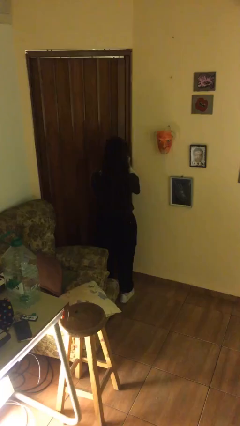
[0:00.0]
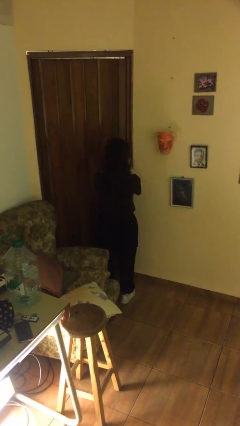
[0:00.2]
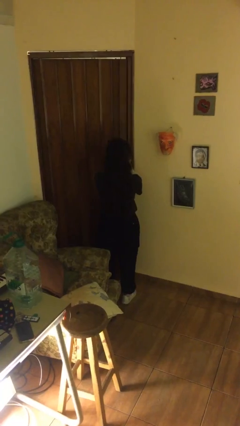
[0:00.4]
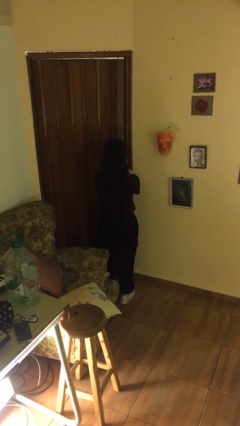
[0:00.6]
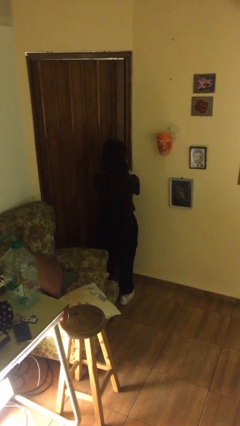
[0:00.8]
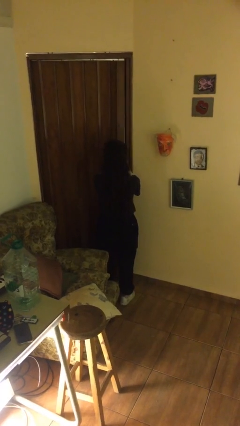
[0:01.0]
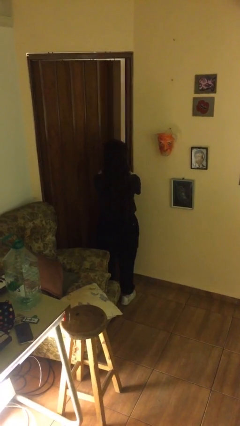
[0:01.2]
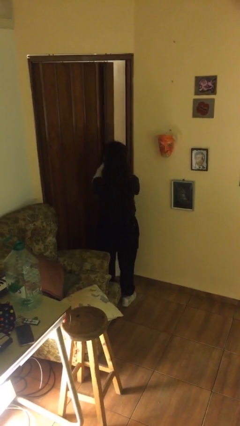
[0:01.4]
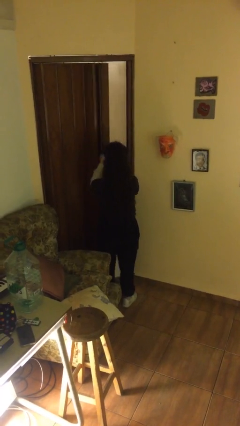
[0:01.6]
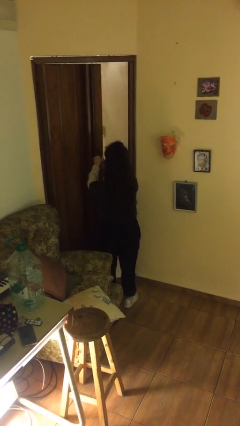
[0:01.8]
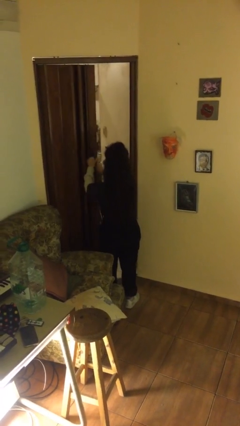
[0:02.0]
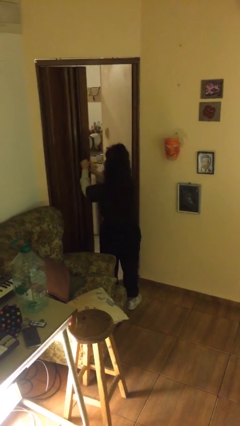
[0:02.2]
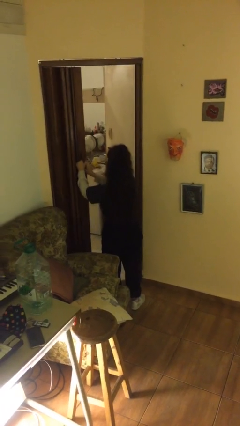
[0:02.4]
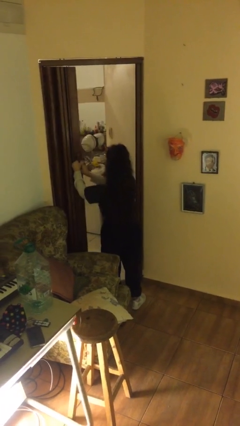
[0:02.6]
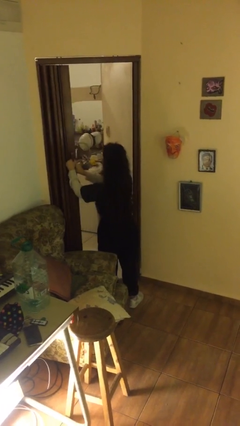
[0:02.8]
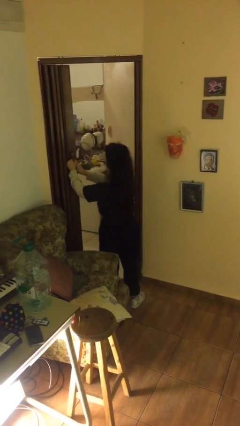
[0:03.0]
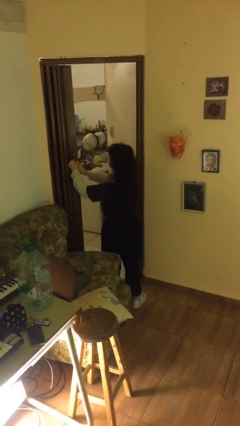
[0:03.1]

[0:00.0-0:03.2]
person opens sliding door

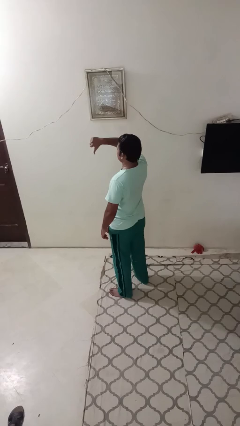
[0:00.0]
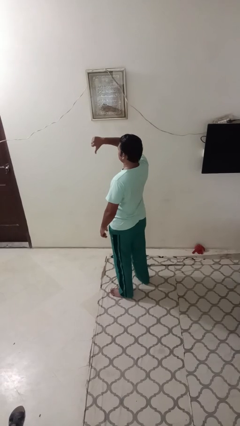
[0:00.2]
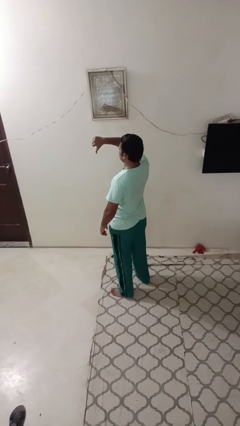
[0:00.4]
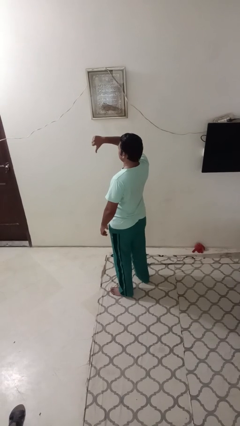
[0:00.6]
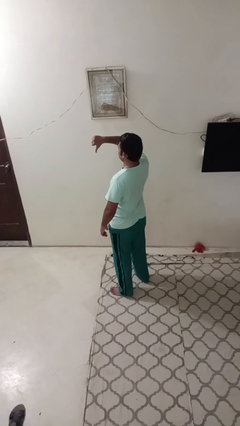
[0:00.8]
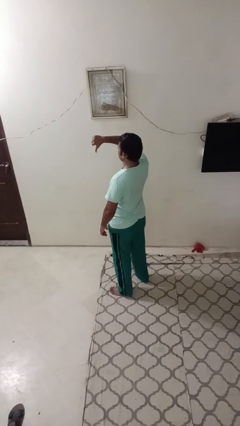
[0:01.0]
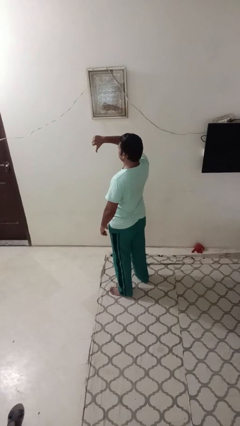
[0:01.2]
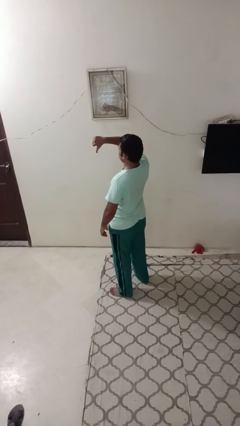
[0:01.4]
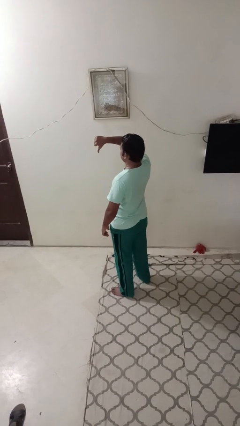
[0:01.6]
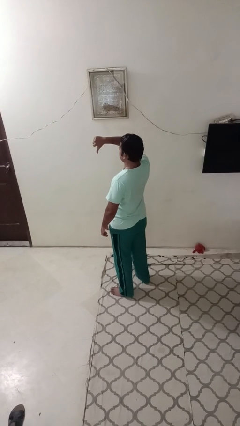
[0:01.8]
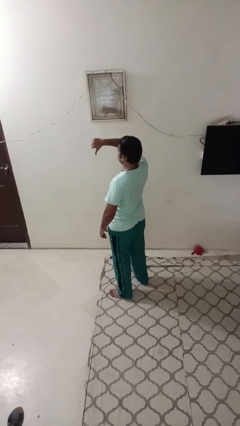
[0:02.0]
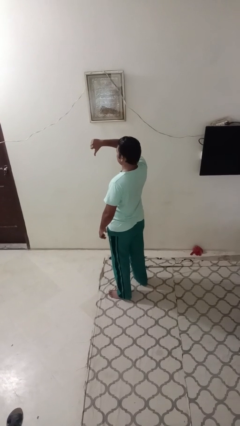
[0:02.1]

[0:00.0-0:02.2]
person gestures thumbs down

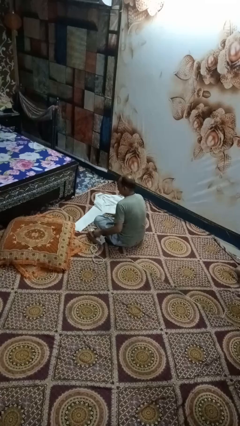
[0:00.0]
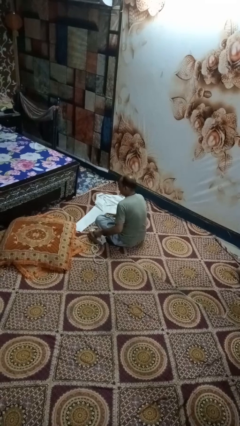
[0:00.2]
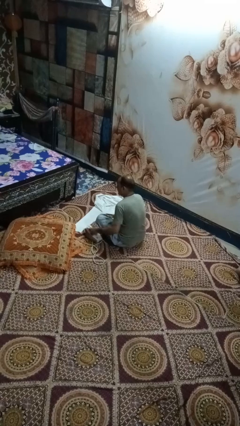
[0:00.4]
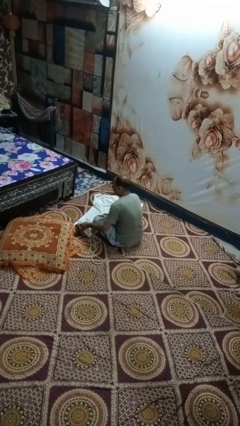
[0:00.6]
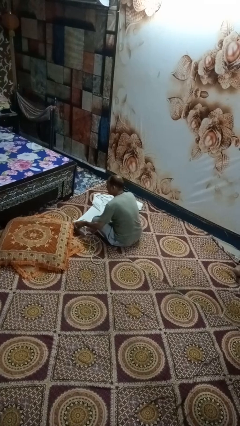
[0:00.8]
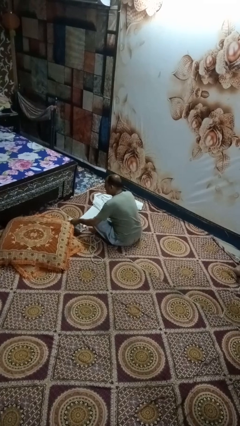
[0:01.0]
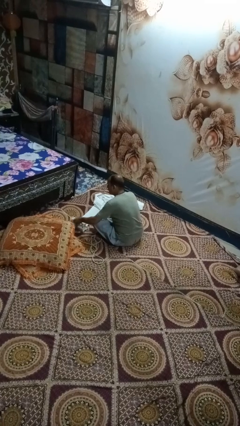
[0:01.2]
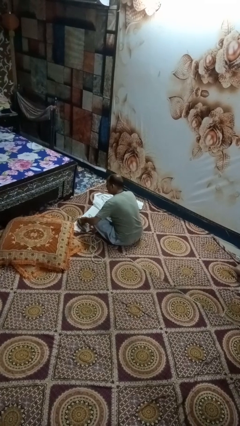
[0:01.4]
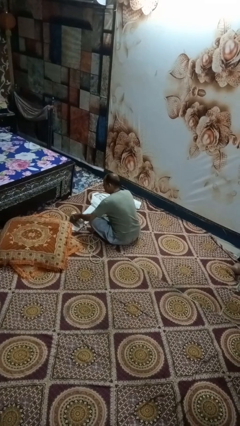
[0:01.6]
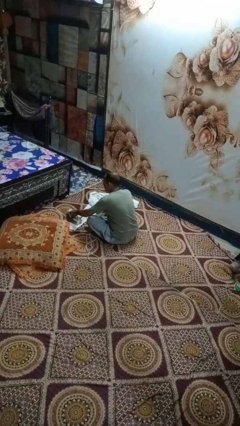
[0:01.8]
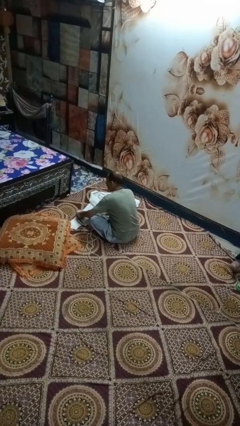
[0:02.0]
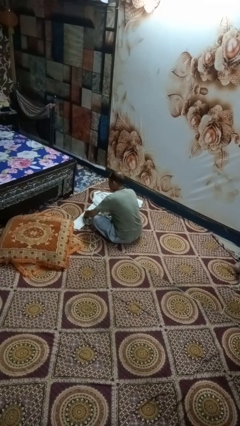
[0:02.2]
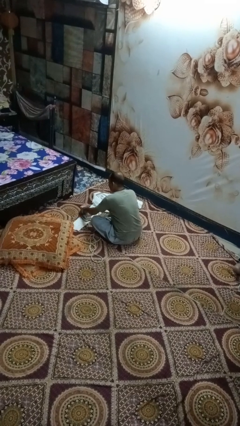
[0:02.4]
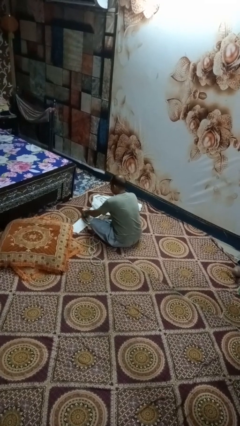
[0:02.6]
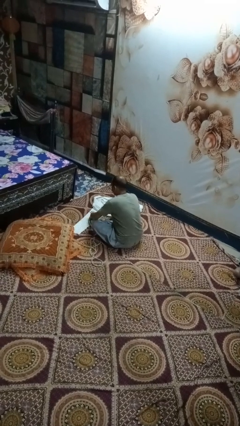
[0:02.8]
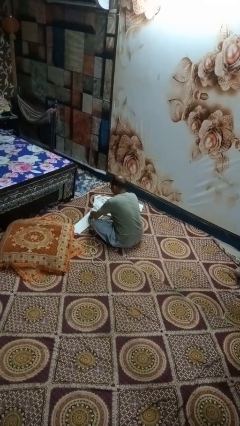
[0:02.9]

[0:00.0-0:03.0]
person irons clothes

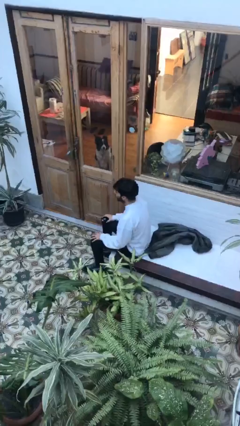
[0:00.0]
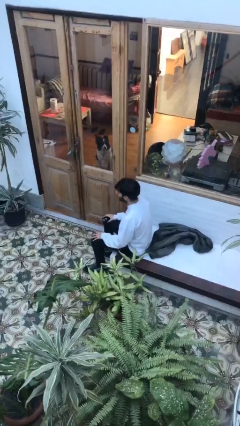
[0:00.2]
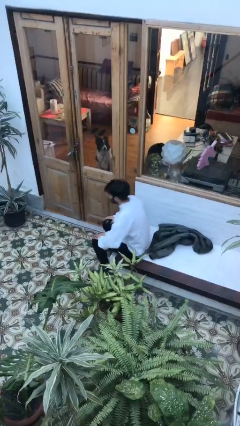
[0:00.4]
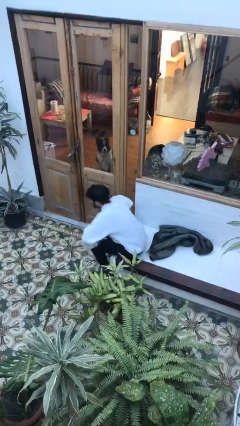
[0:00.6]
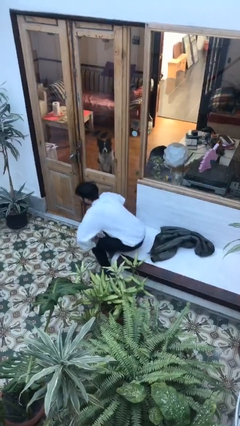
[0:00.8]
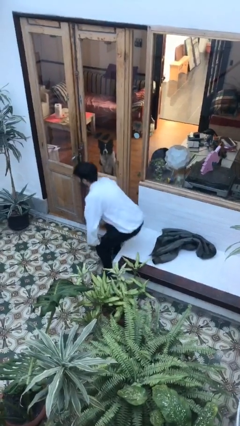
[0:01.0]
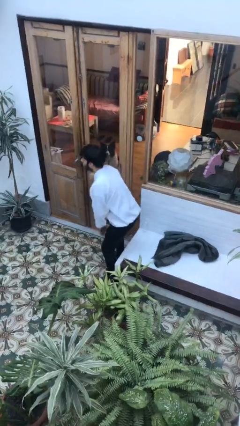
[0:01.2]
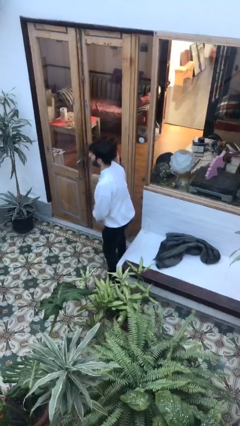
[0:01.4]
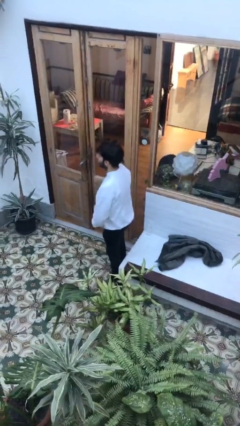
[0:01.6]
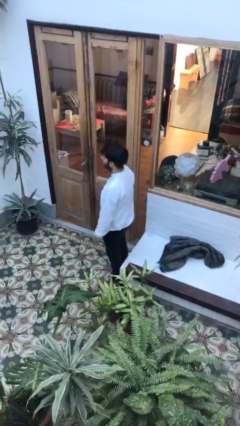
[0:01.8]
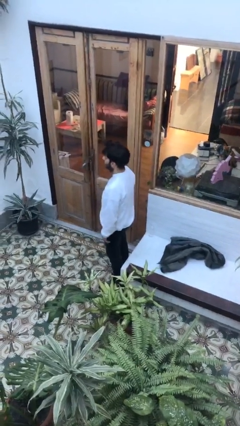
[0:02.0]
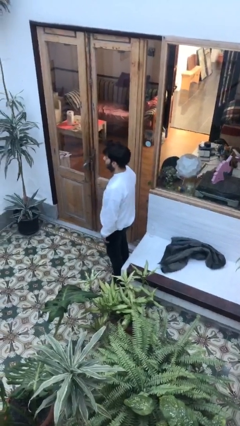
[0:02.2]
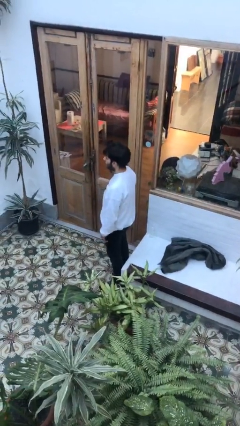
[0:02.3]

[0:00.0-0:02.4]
person stands up

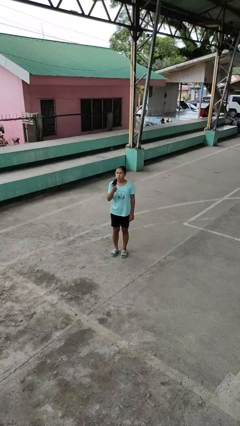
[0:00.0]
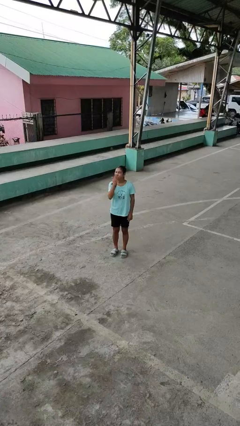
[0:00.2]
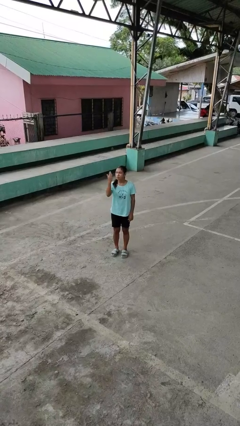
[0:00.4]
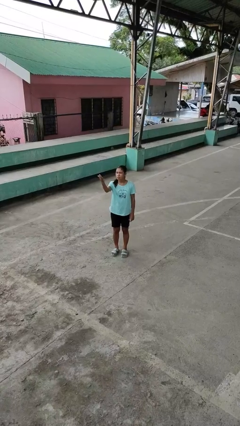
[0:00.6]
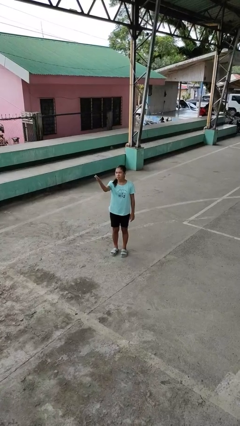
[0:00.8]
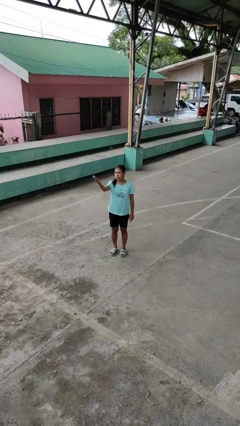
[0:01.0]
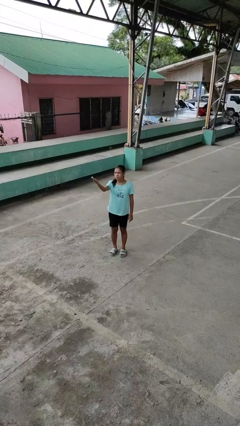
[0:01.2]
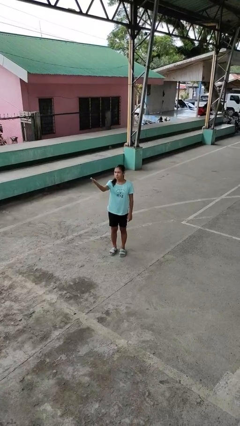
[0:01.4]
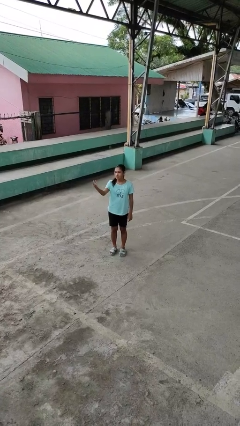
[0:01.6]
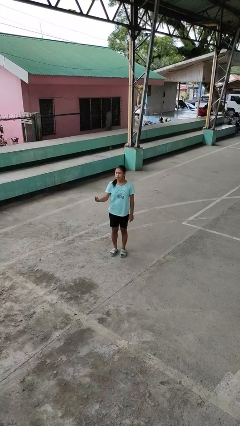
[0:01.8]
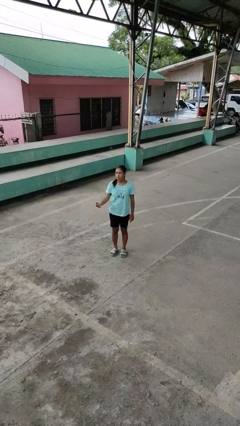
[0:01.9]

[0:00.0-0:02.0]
person gestures blow kiss

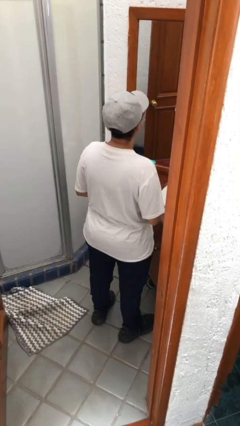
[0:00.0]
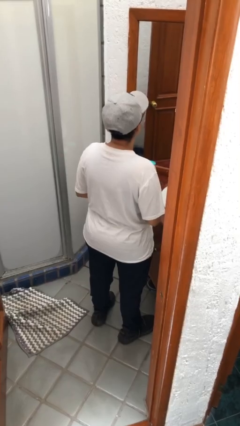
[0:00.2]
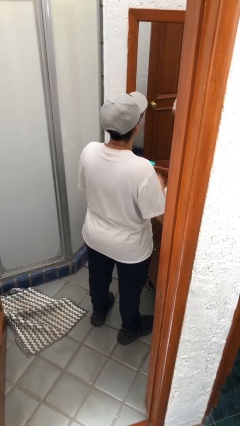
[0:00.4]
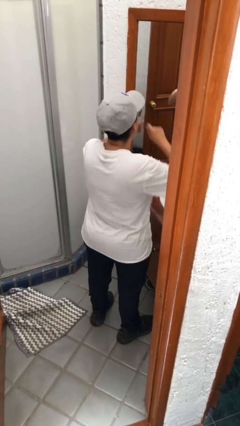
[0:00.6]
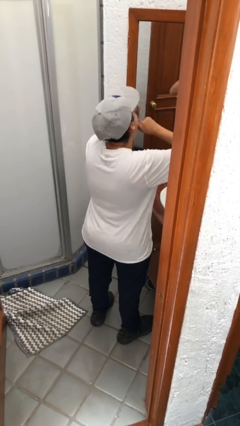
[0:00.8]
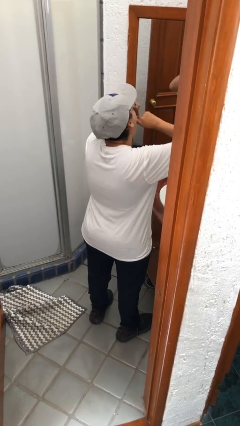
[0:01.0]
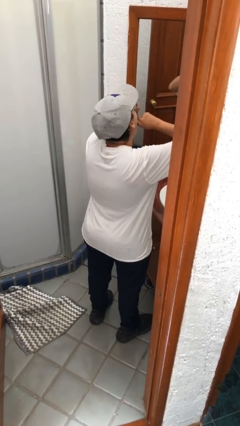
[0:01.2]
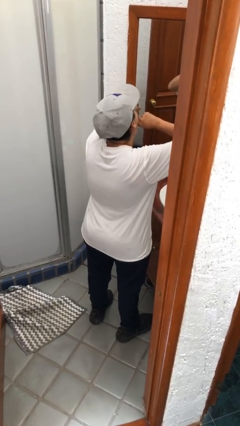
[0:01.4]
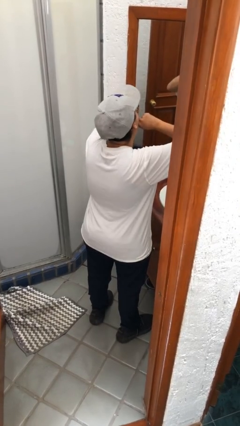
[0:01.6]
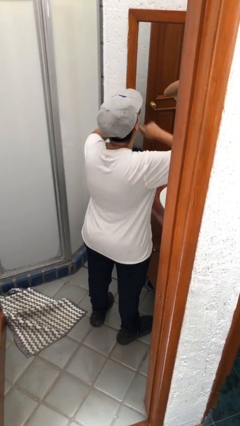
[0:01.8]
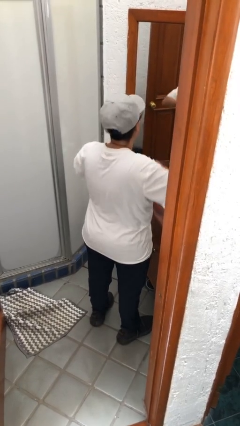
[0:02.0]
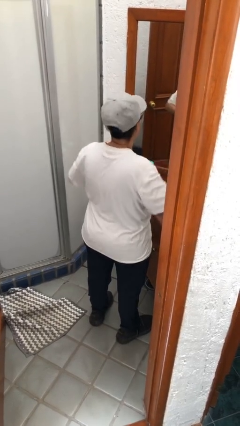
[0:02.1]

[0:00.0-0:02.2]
person flosses

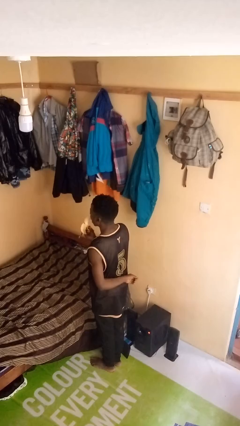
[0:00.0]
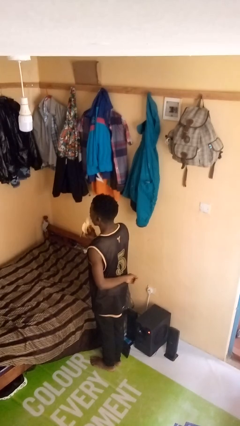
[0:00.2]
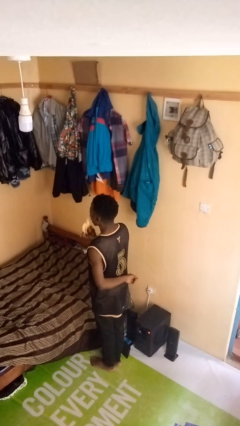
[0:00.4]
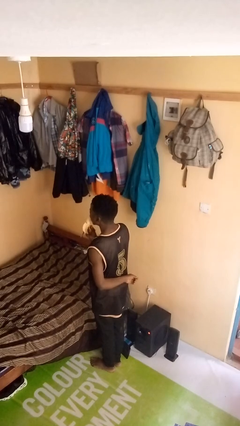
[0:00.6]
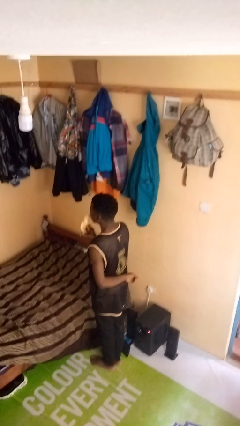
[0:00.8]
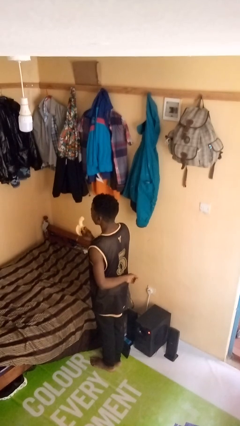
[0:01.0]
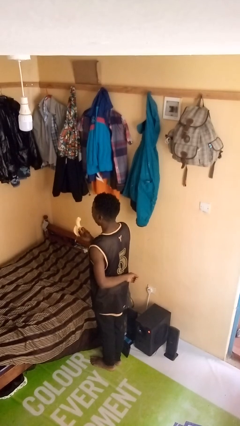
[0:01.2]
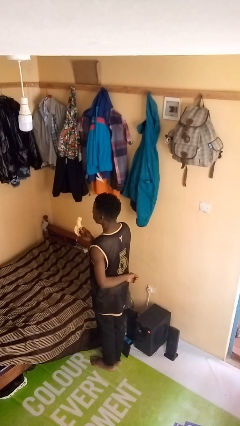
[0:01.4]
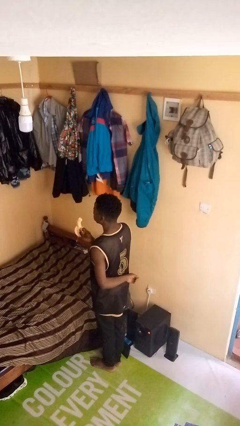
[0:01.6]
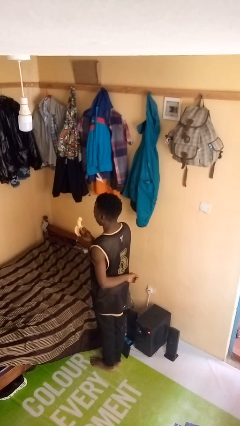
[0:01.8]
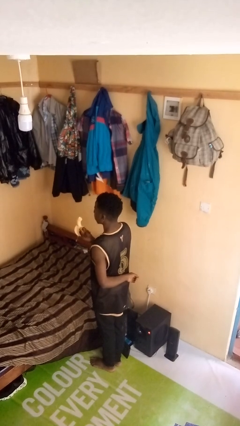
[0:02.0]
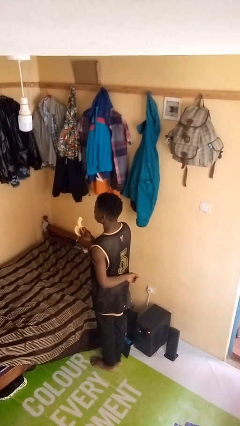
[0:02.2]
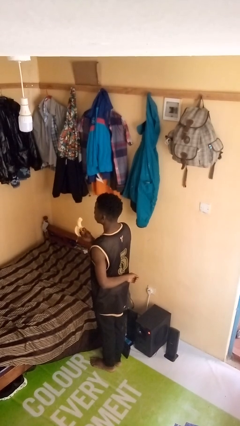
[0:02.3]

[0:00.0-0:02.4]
person eats banana
